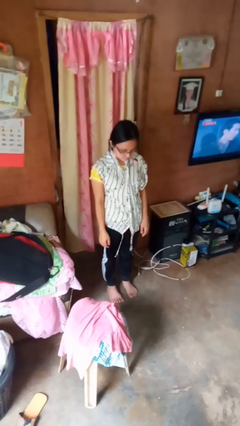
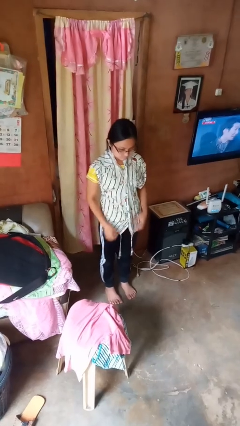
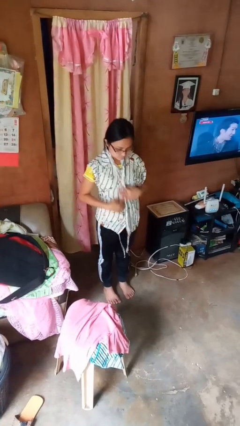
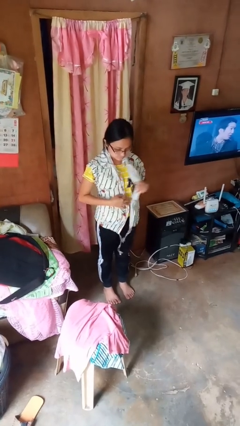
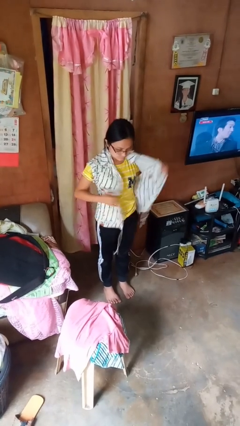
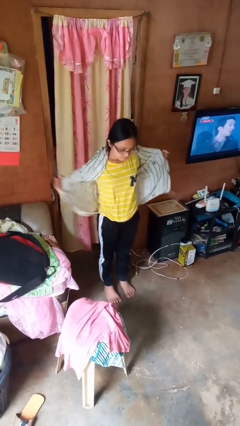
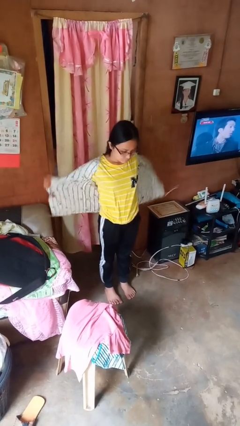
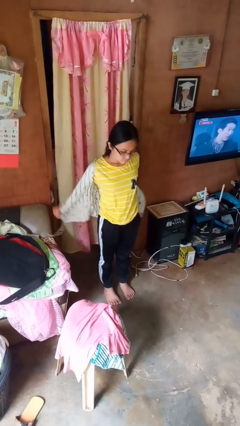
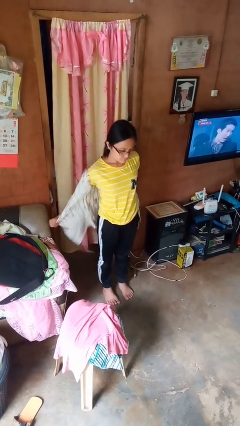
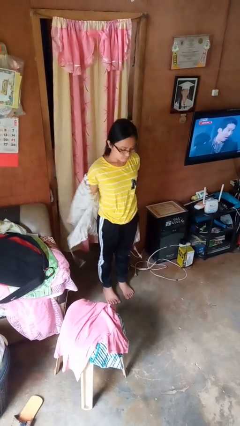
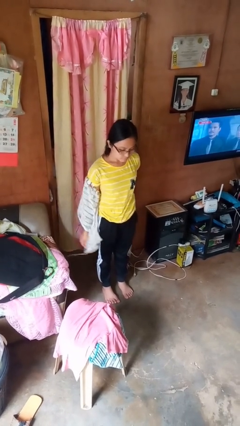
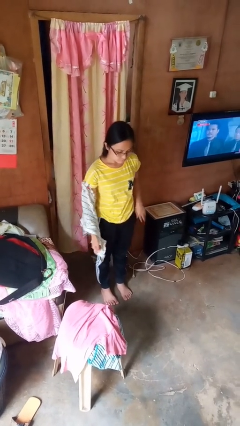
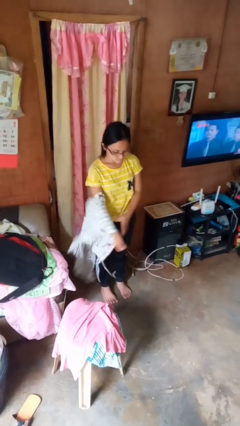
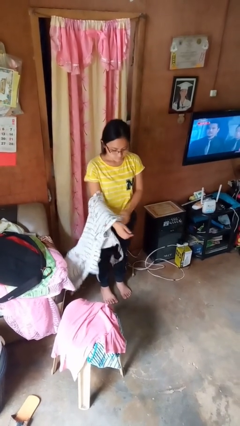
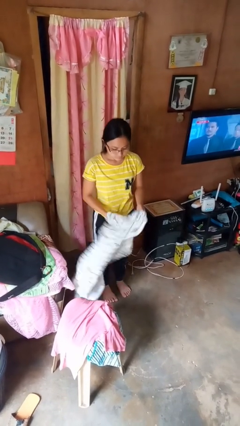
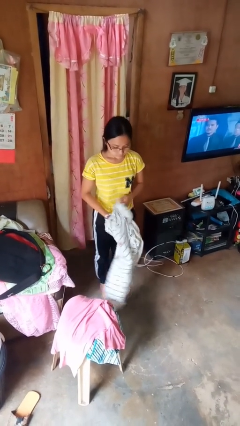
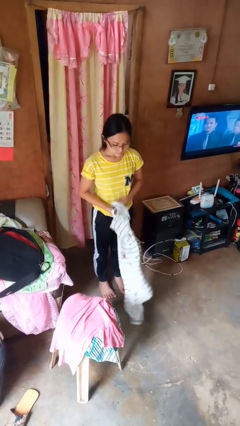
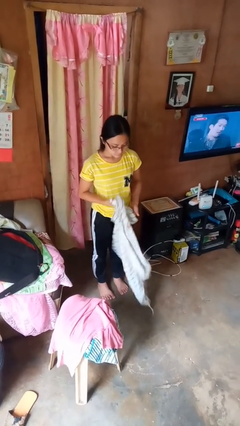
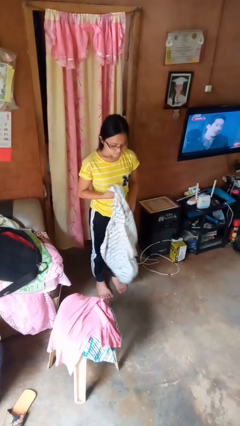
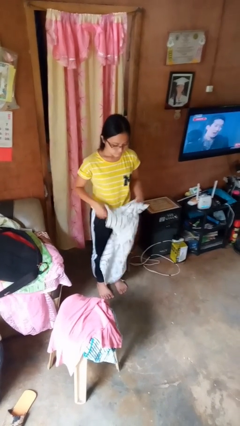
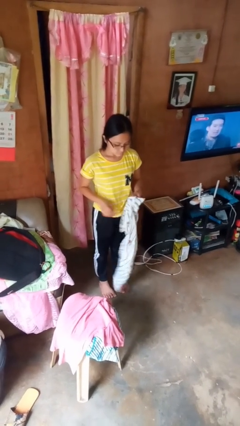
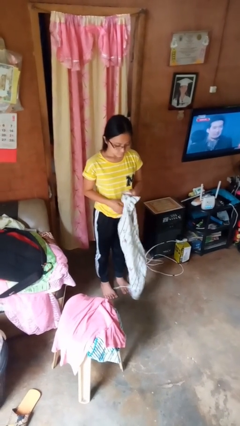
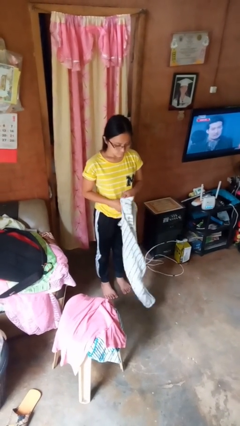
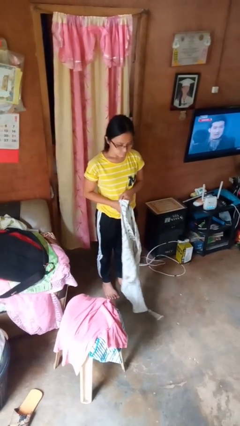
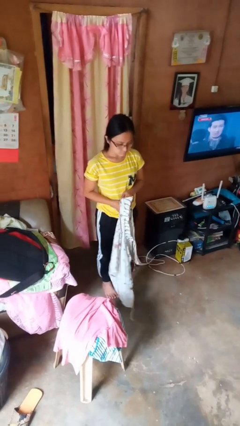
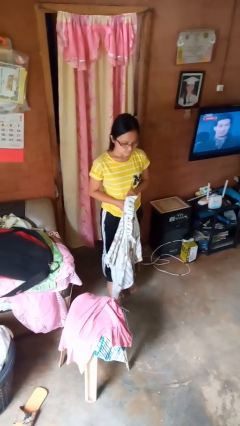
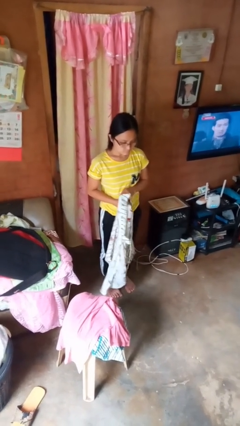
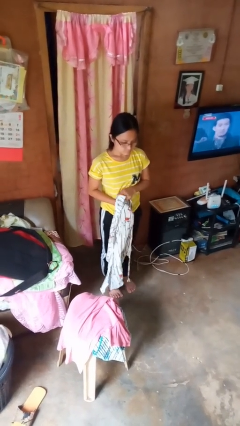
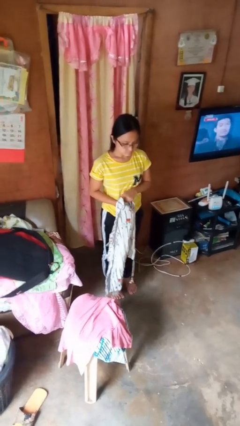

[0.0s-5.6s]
person takes off shirt

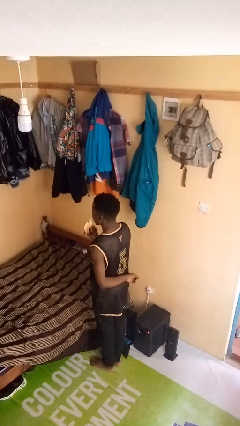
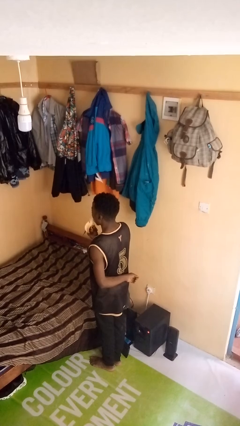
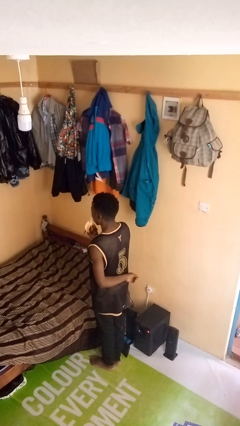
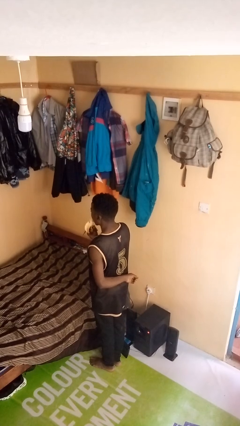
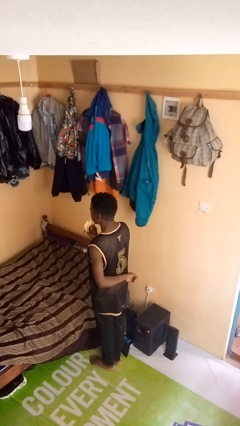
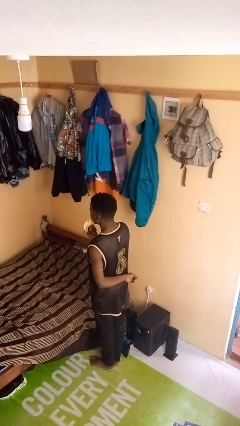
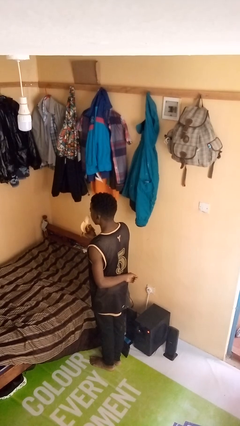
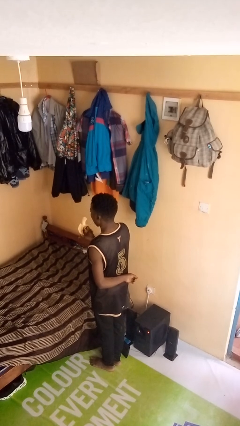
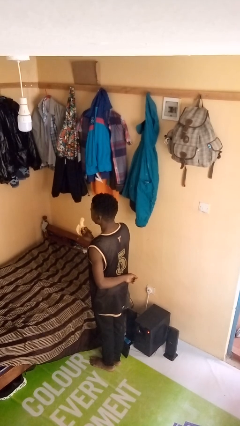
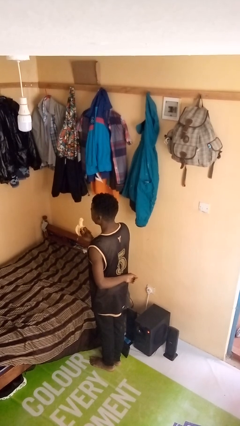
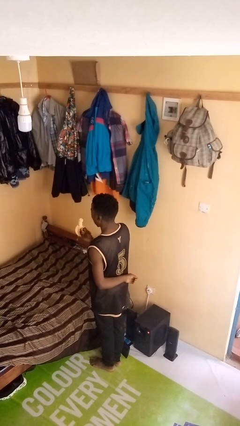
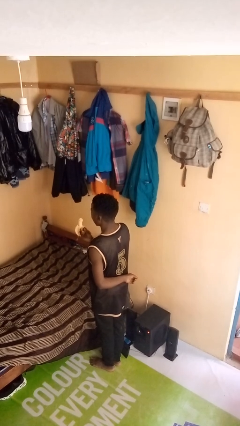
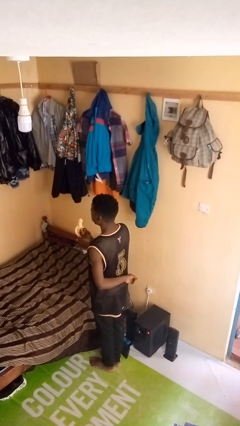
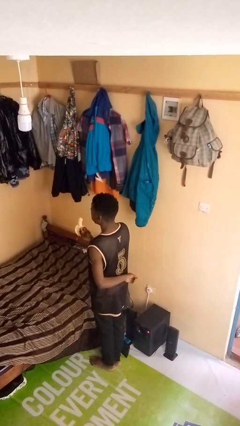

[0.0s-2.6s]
person eats banana

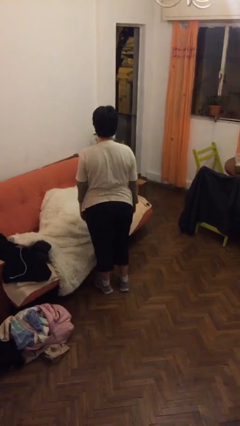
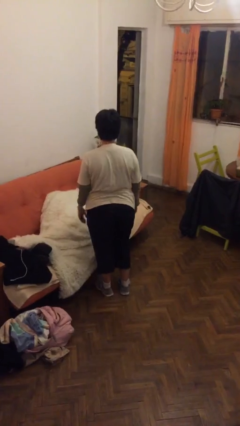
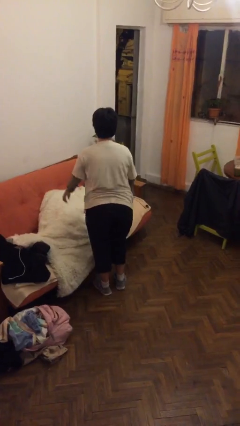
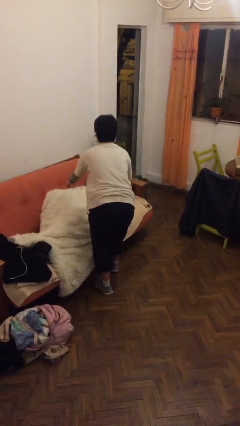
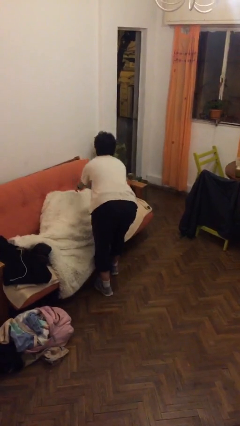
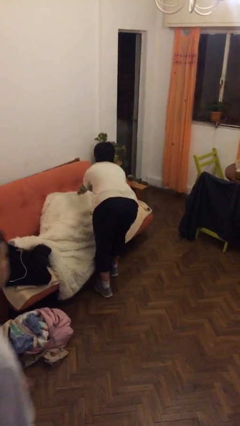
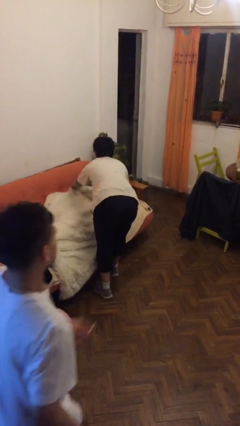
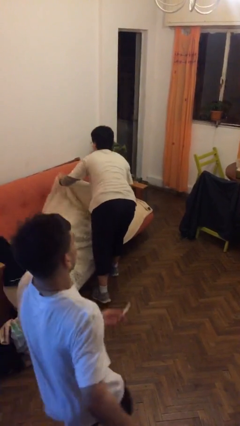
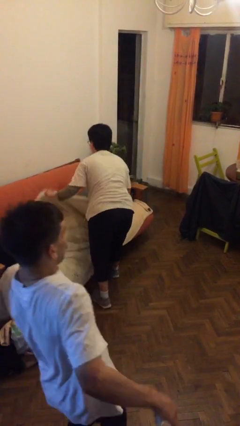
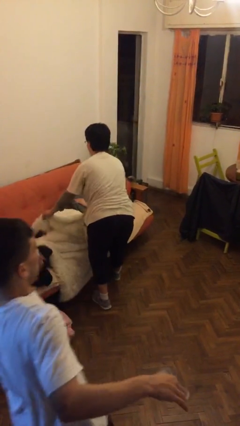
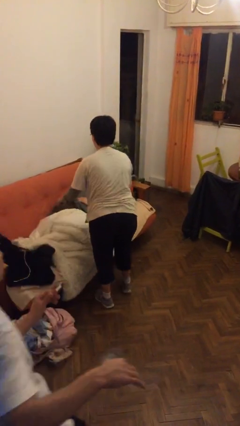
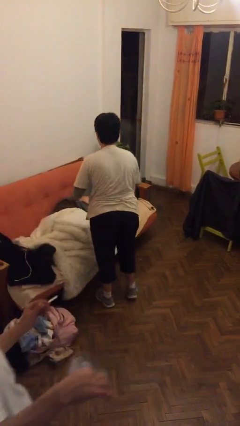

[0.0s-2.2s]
person uncovers friend with blanket

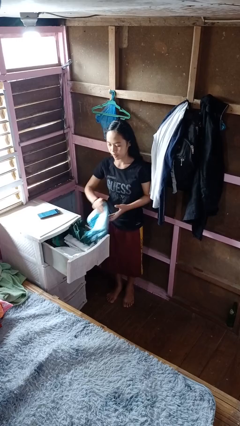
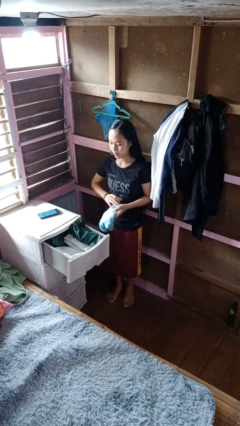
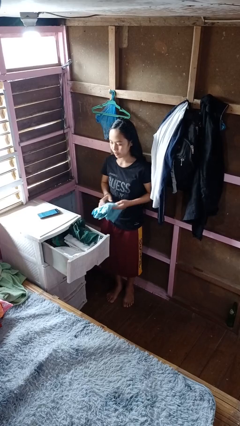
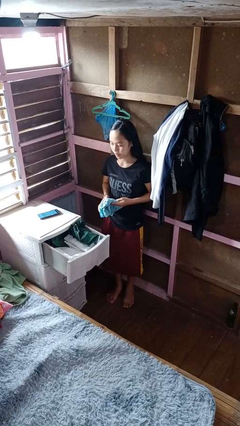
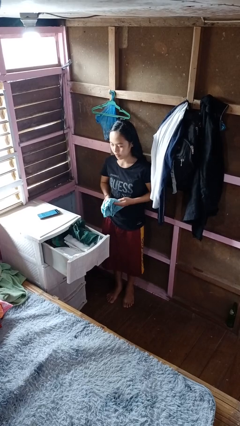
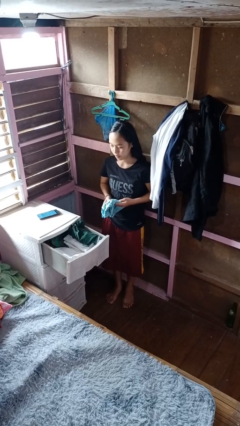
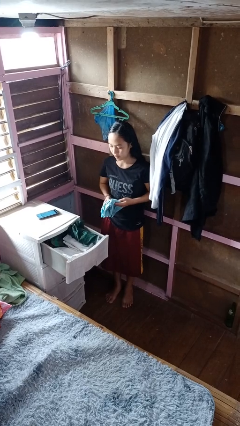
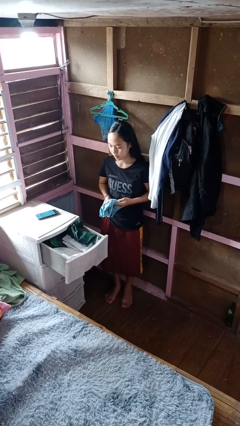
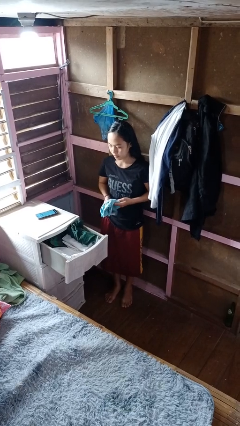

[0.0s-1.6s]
person takes clothes from dresser

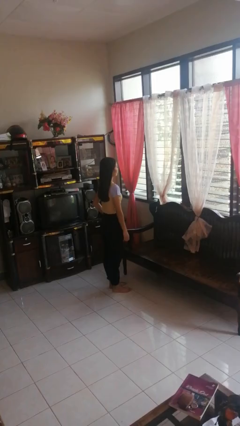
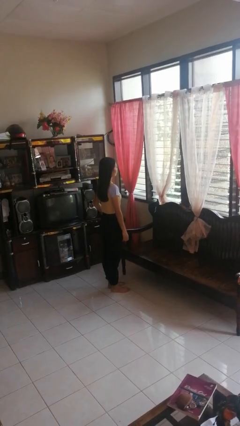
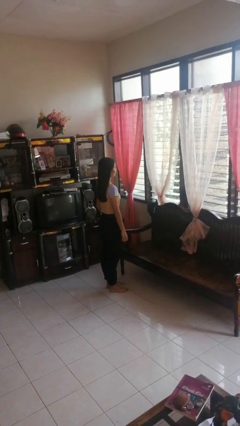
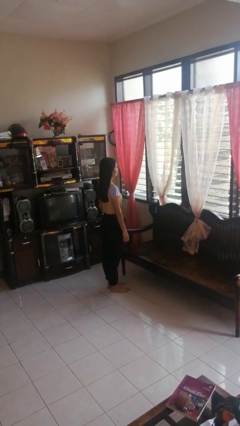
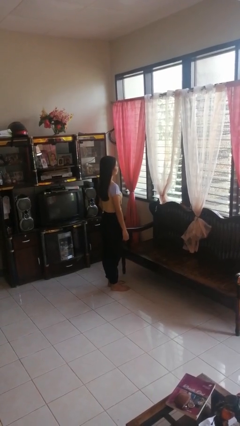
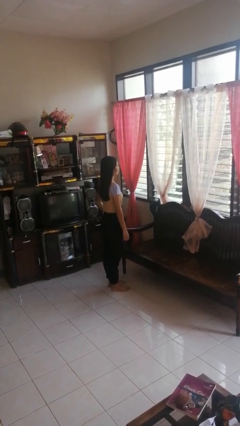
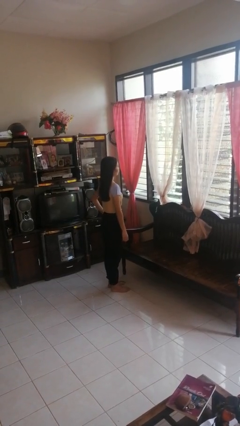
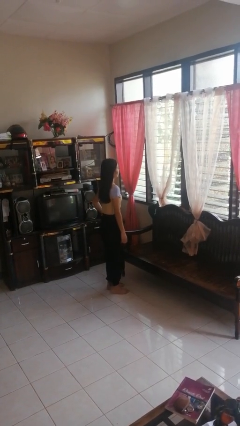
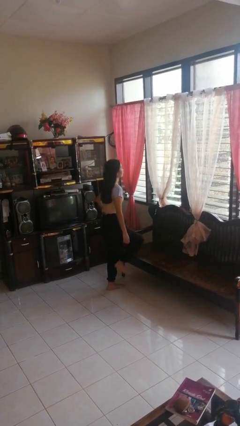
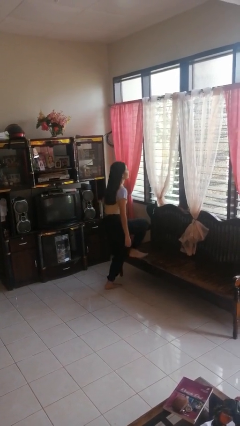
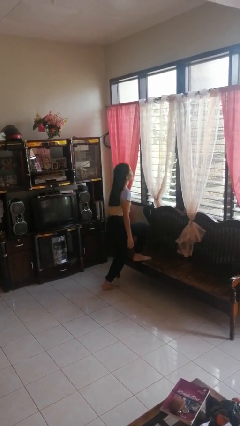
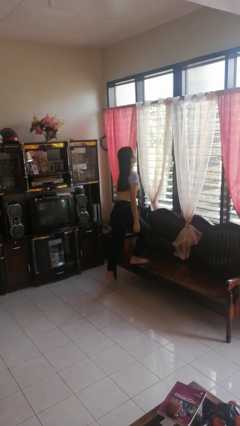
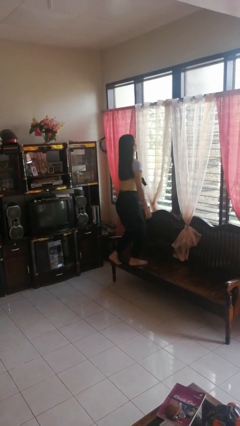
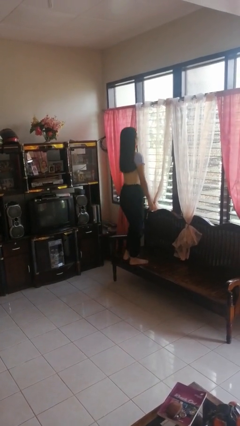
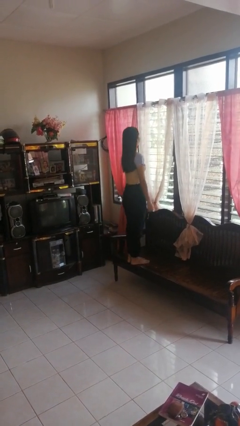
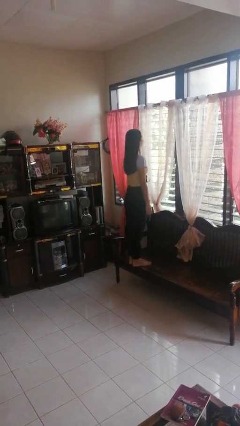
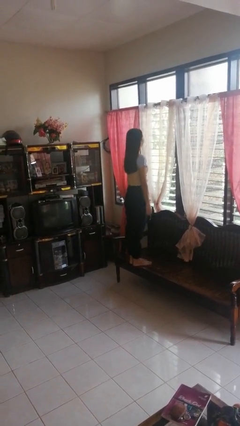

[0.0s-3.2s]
person climbs on couch

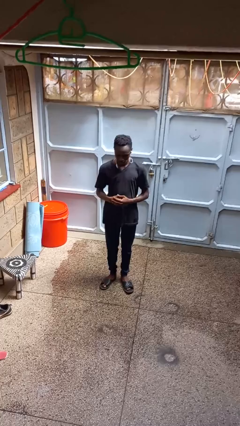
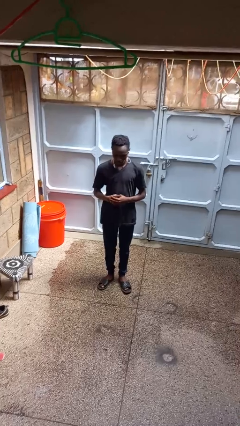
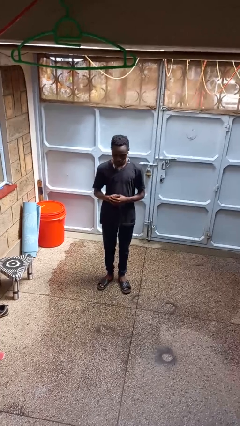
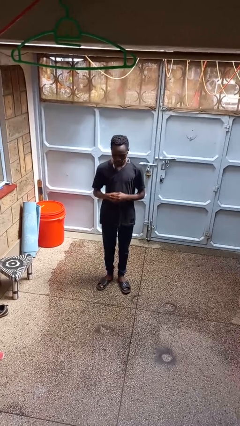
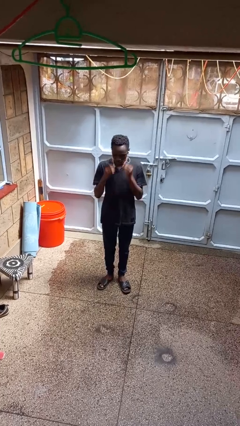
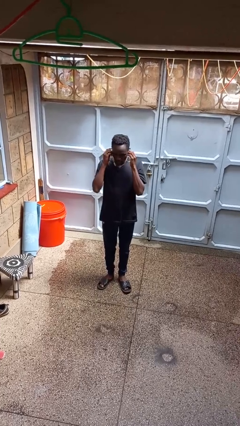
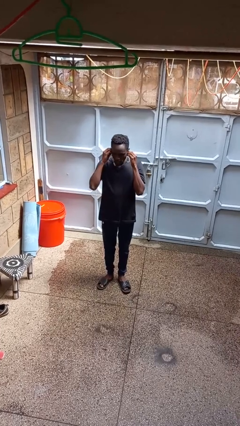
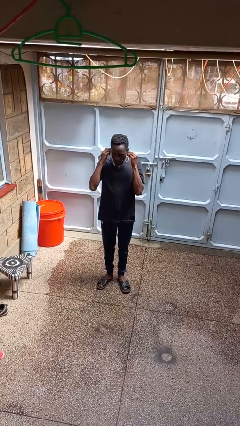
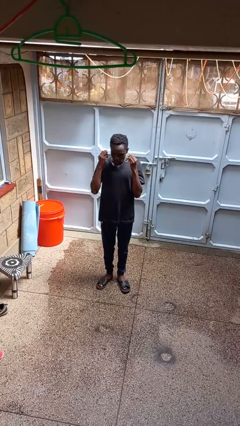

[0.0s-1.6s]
person takes off headphones

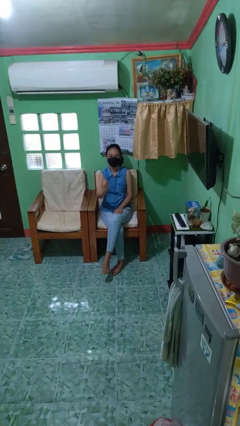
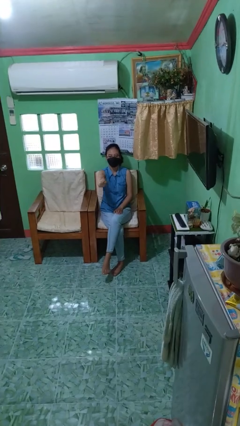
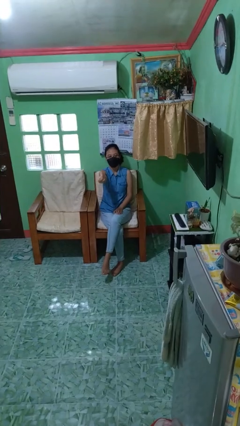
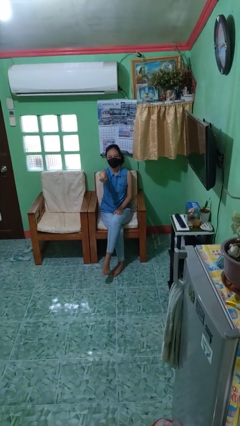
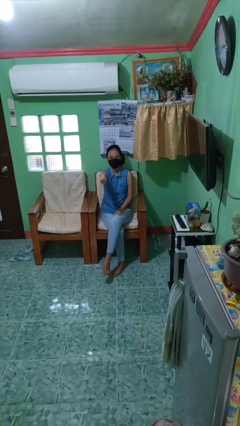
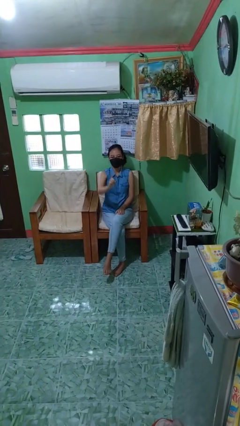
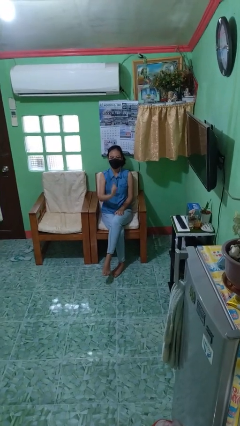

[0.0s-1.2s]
person gestures number one
